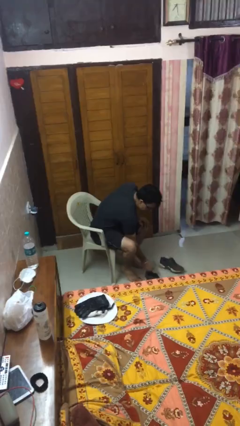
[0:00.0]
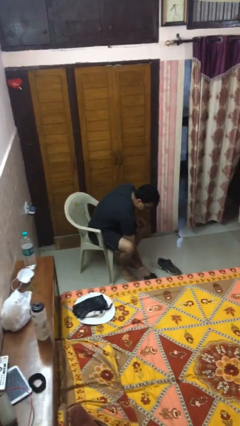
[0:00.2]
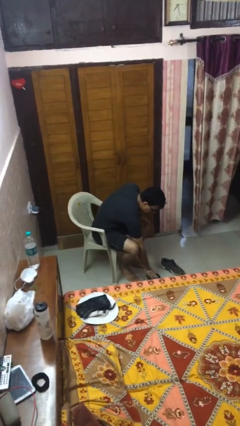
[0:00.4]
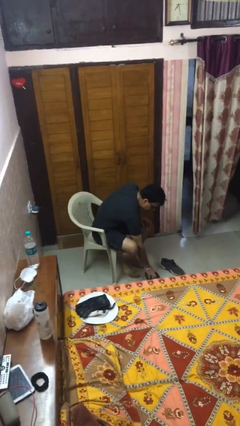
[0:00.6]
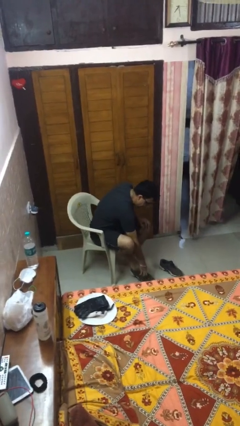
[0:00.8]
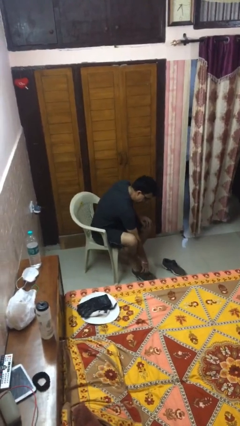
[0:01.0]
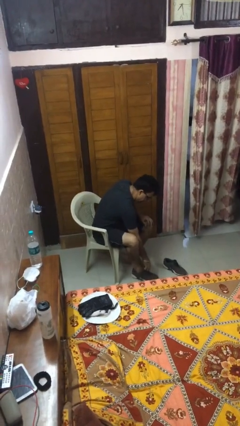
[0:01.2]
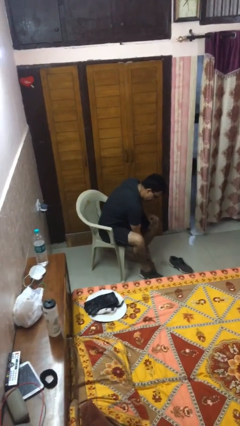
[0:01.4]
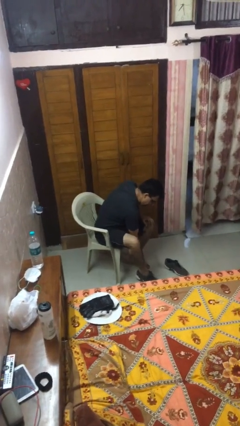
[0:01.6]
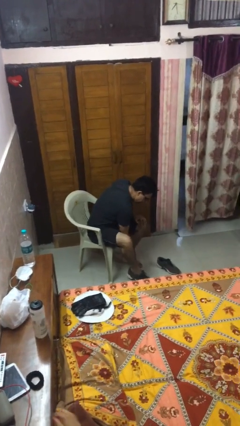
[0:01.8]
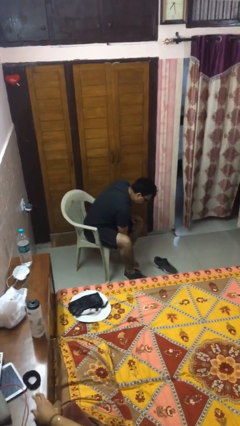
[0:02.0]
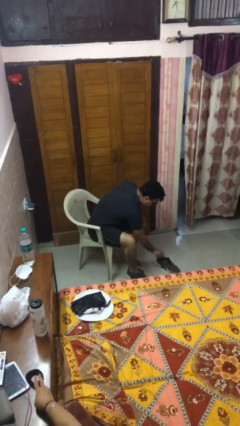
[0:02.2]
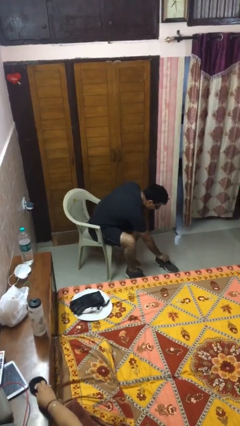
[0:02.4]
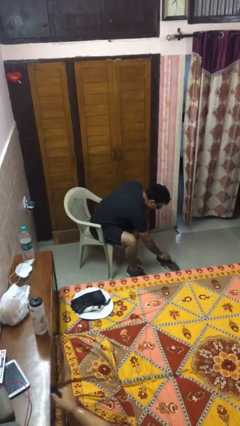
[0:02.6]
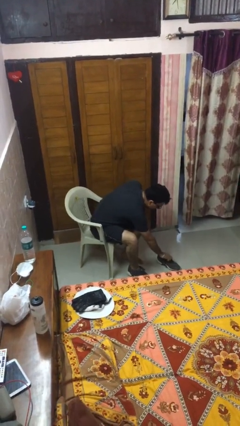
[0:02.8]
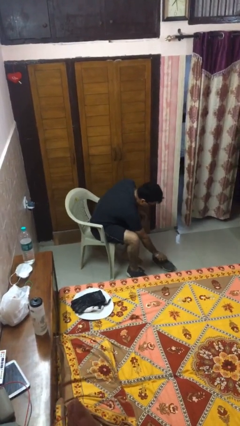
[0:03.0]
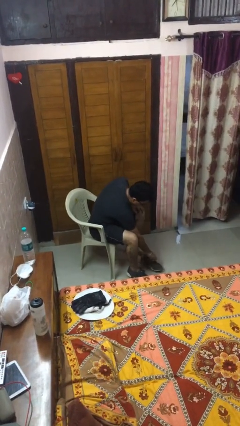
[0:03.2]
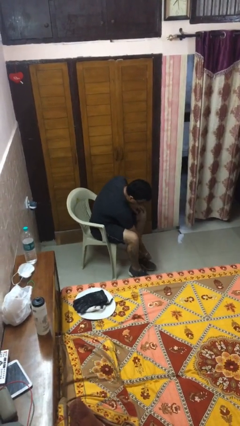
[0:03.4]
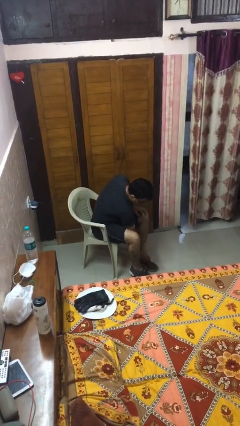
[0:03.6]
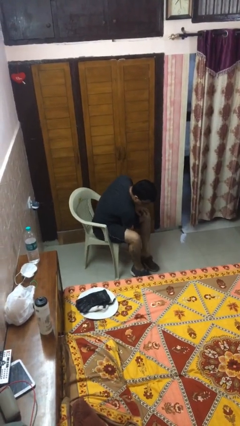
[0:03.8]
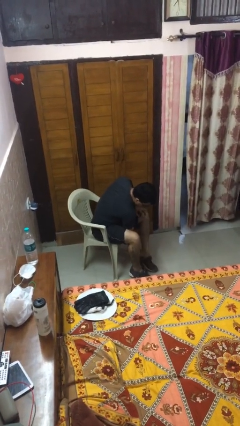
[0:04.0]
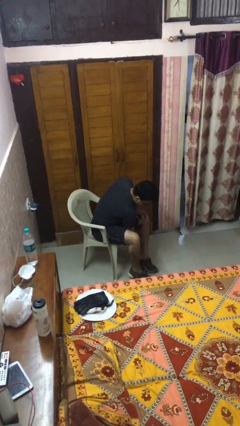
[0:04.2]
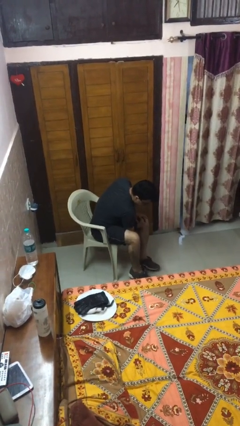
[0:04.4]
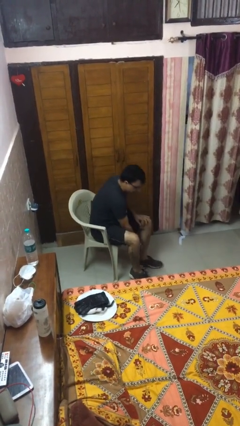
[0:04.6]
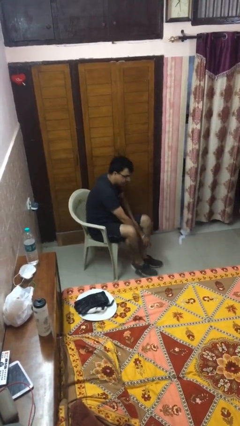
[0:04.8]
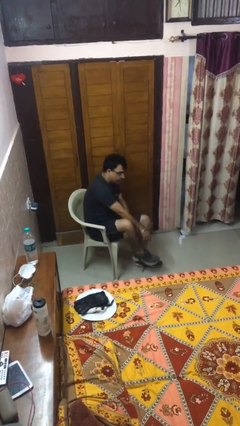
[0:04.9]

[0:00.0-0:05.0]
person puts on shoes

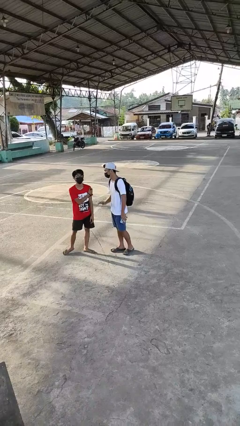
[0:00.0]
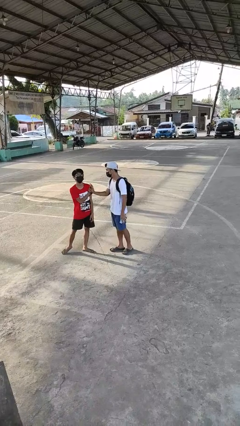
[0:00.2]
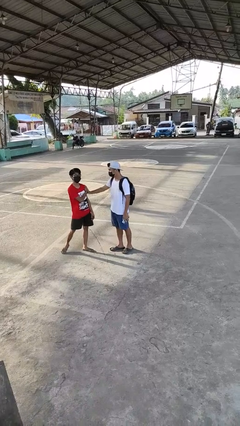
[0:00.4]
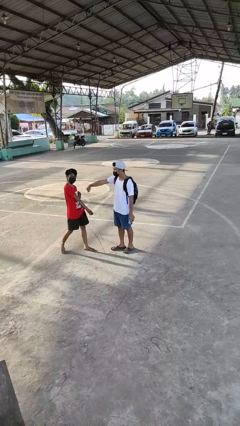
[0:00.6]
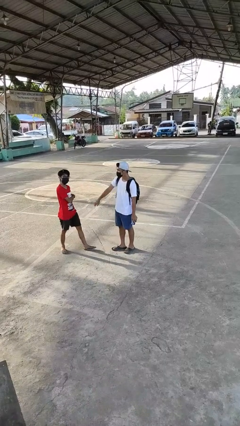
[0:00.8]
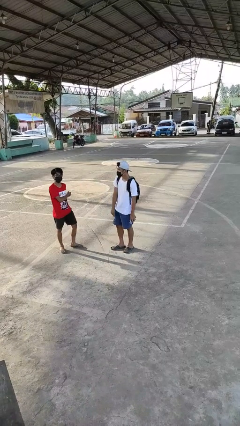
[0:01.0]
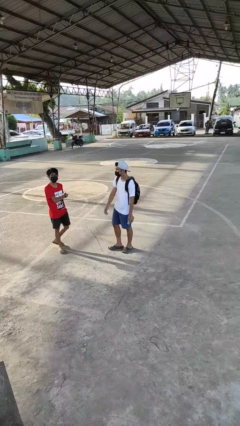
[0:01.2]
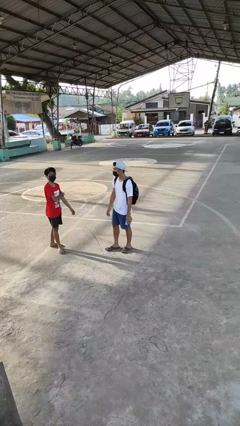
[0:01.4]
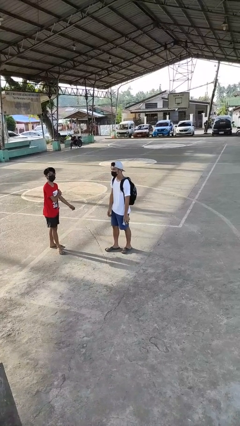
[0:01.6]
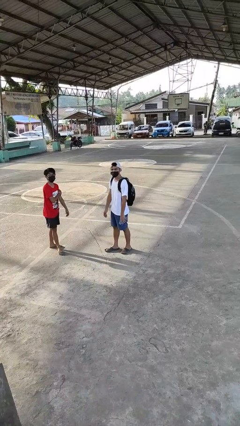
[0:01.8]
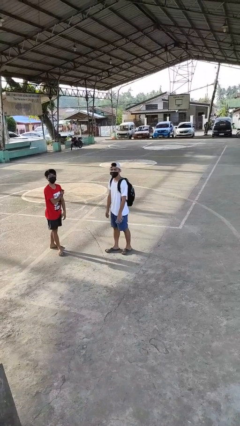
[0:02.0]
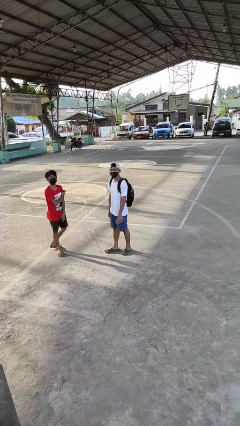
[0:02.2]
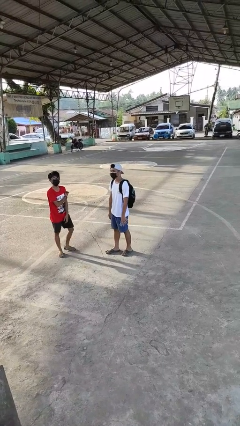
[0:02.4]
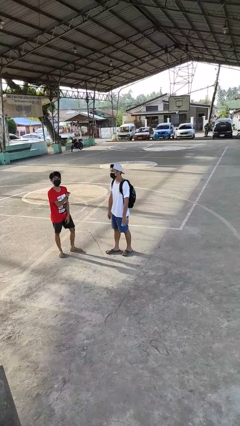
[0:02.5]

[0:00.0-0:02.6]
person shoves person

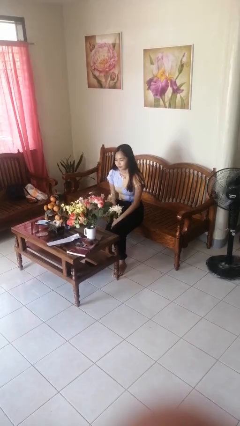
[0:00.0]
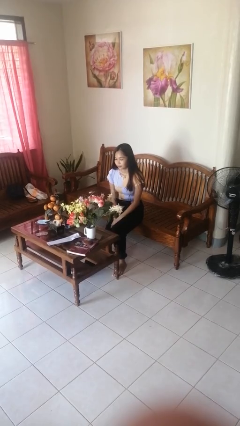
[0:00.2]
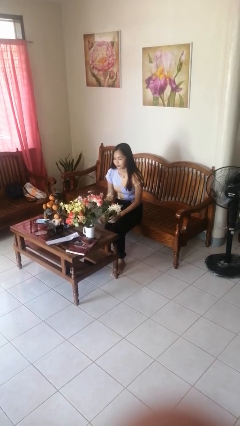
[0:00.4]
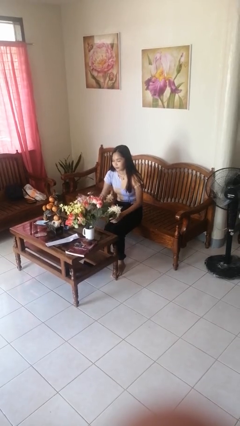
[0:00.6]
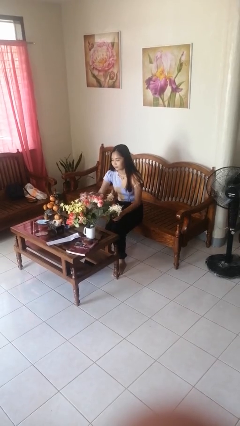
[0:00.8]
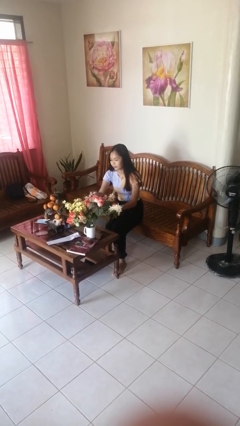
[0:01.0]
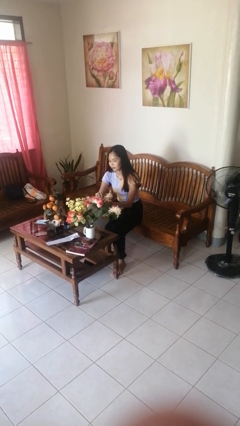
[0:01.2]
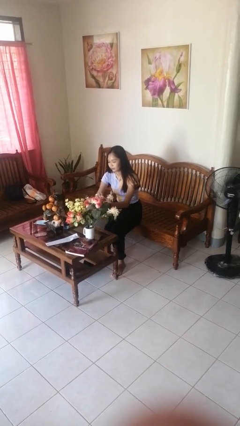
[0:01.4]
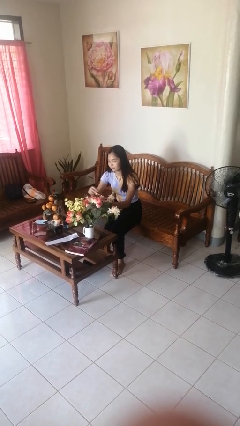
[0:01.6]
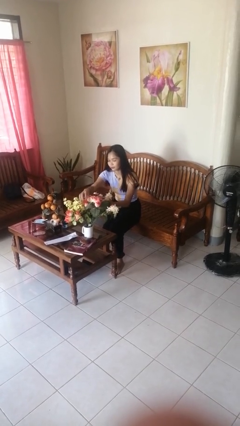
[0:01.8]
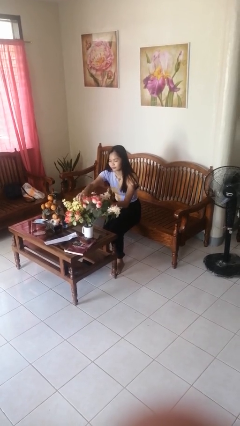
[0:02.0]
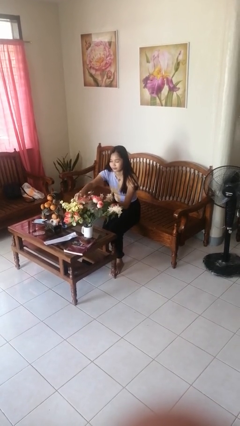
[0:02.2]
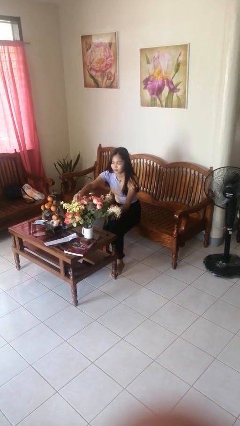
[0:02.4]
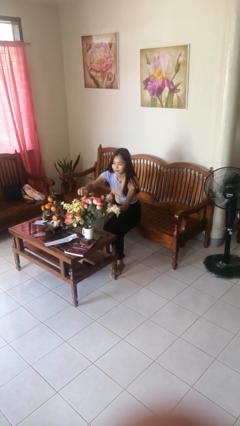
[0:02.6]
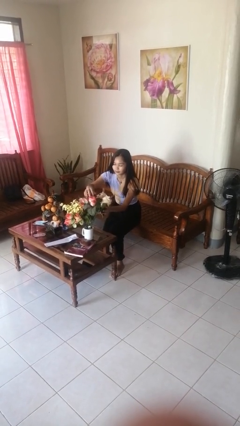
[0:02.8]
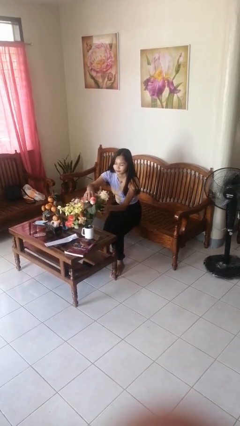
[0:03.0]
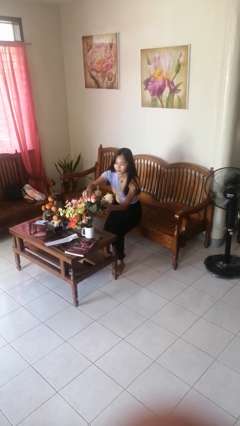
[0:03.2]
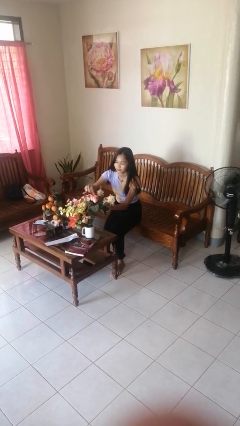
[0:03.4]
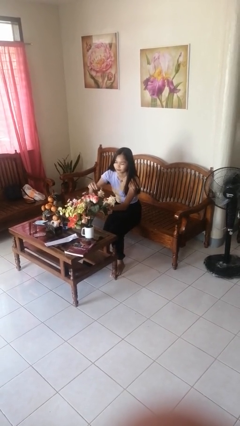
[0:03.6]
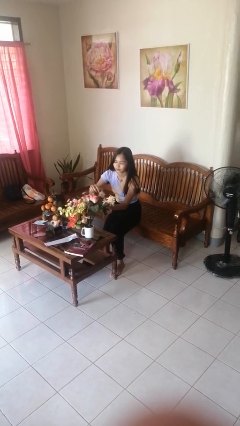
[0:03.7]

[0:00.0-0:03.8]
person arranges flowers in vase

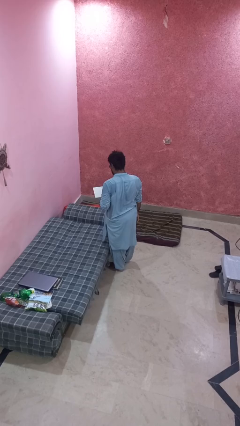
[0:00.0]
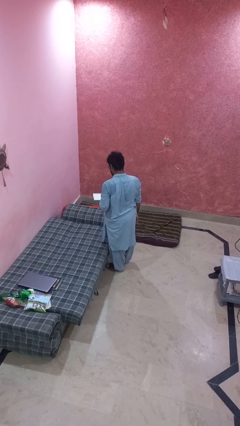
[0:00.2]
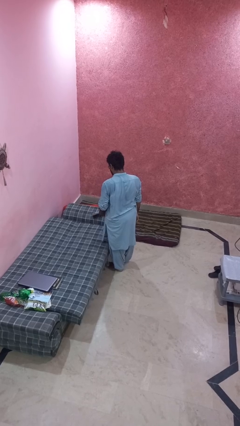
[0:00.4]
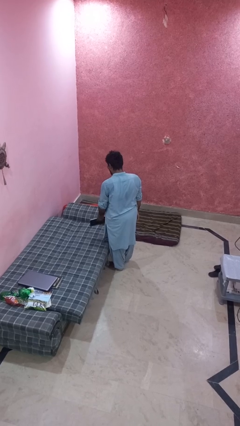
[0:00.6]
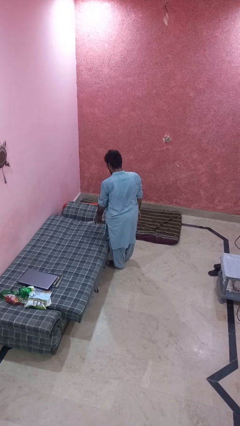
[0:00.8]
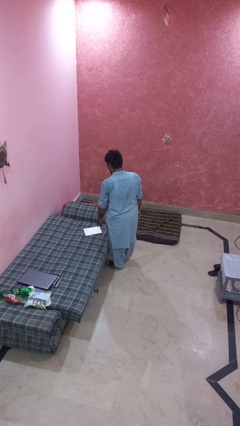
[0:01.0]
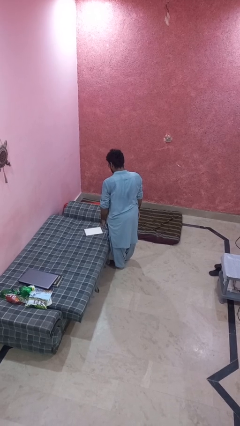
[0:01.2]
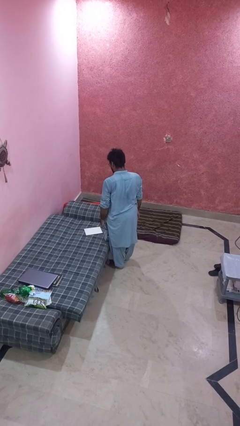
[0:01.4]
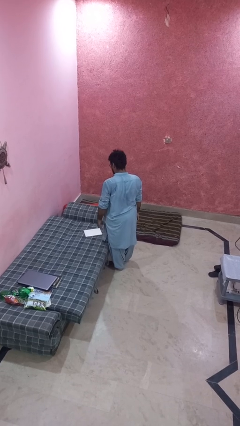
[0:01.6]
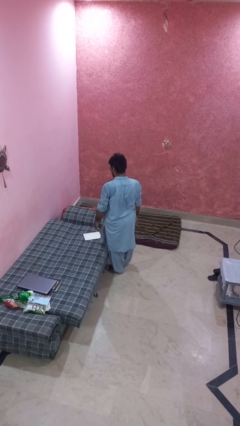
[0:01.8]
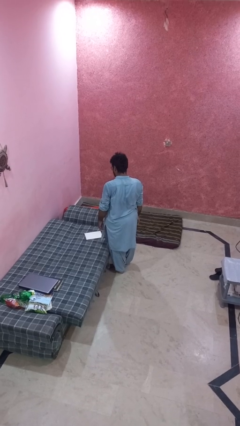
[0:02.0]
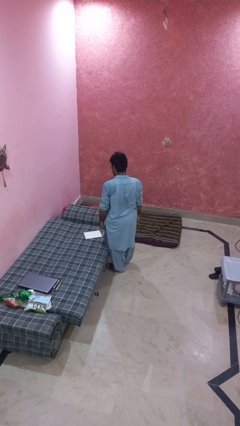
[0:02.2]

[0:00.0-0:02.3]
person puts down object on bed

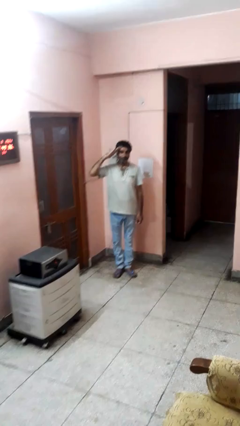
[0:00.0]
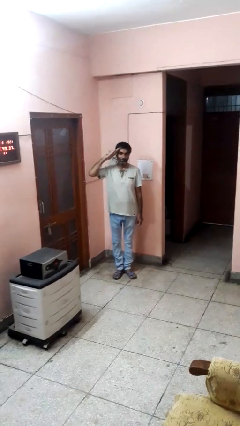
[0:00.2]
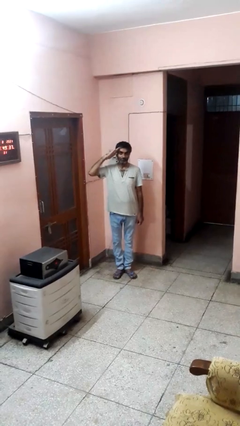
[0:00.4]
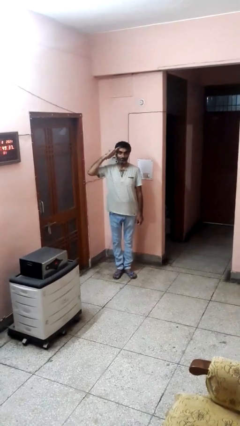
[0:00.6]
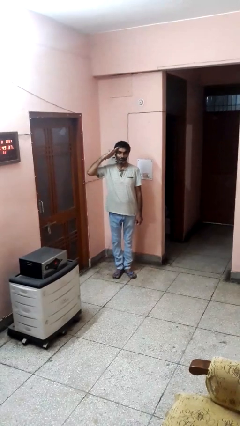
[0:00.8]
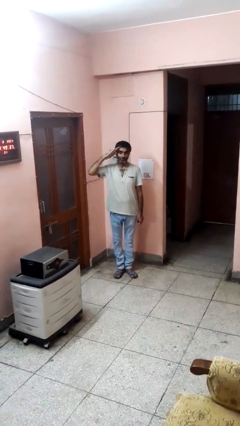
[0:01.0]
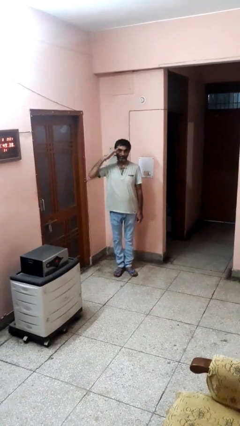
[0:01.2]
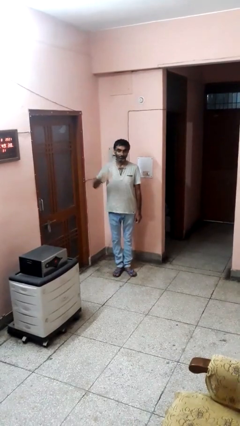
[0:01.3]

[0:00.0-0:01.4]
person salutes

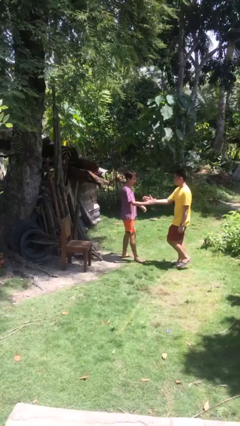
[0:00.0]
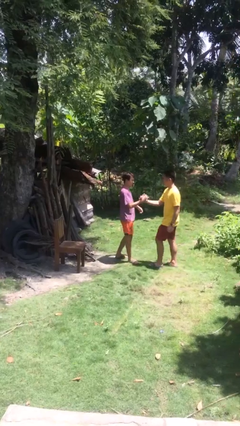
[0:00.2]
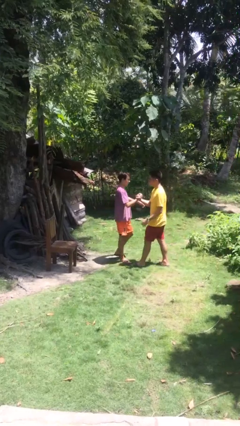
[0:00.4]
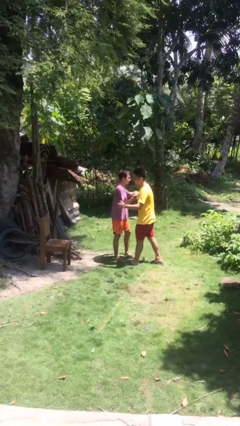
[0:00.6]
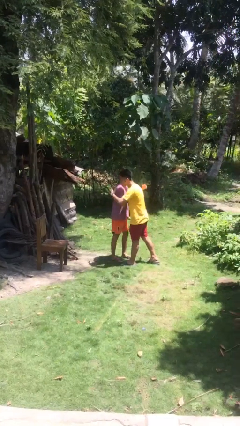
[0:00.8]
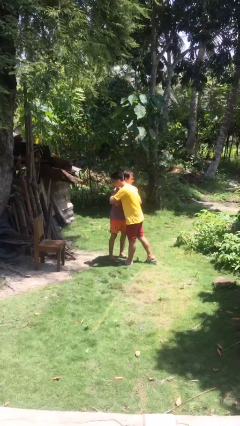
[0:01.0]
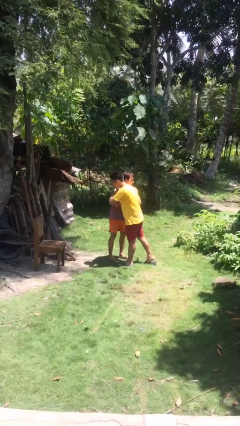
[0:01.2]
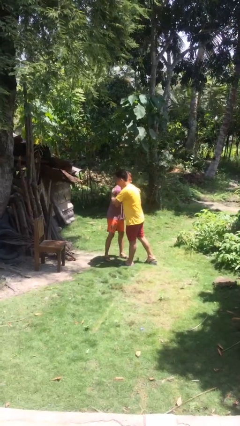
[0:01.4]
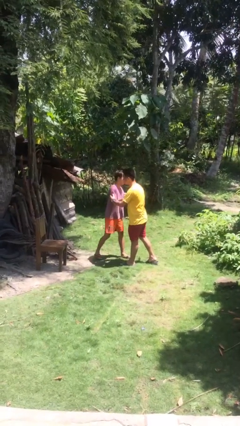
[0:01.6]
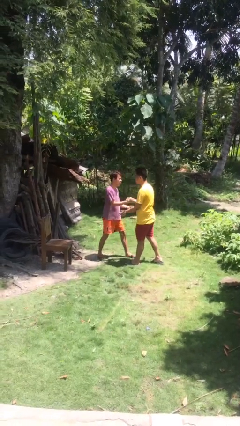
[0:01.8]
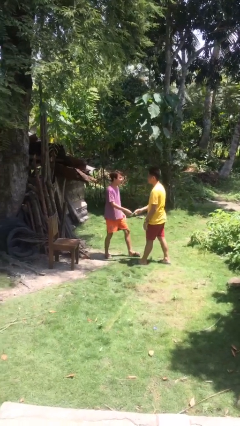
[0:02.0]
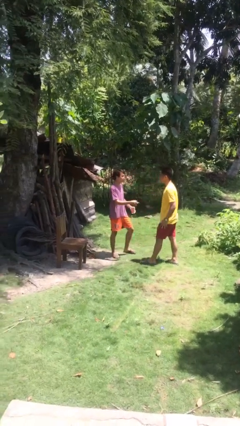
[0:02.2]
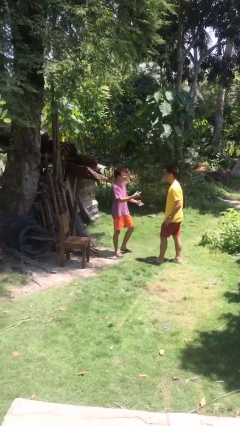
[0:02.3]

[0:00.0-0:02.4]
person embraces person
